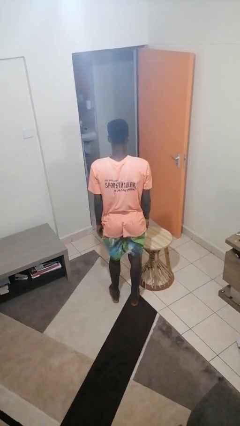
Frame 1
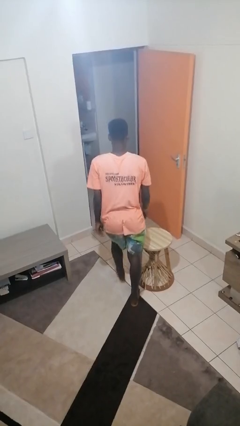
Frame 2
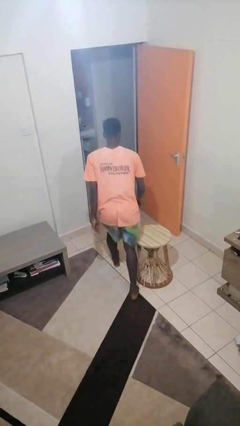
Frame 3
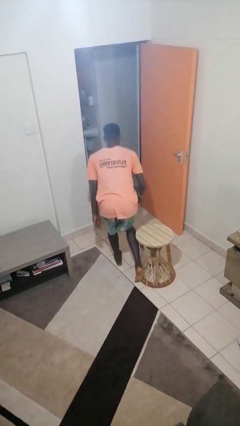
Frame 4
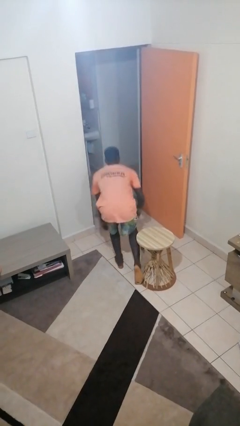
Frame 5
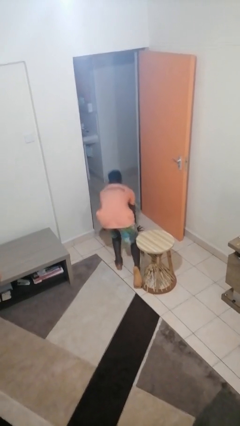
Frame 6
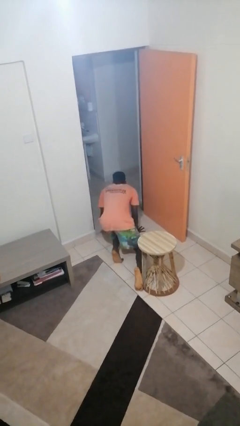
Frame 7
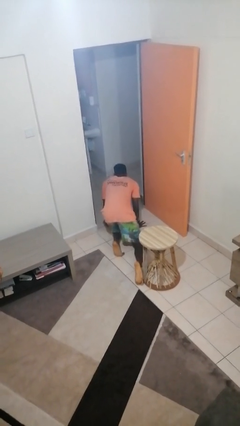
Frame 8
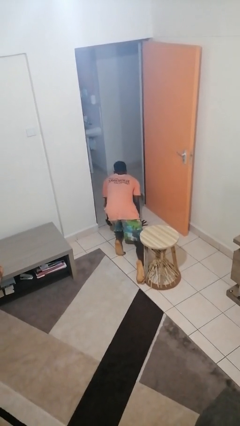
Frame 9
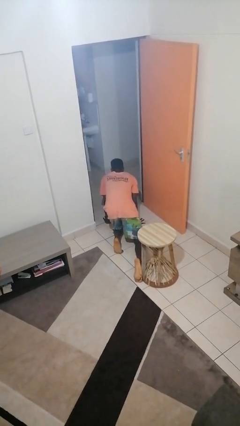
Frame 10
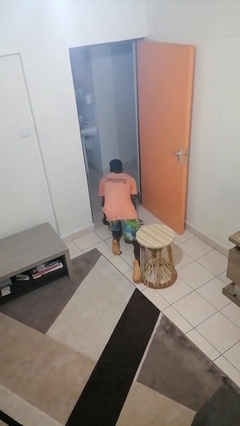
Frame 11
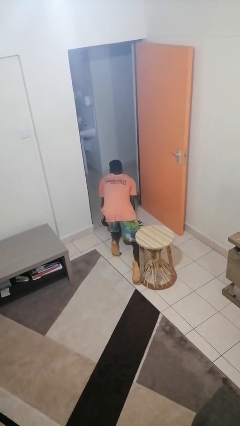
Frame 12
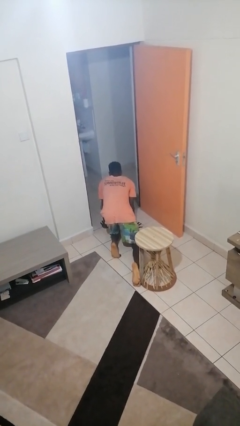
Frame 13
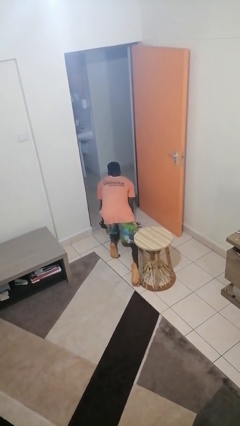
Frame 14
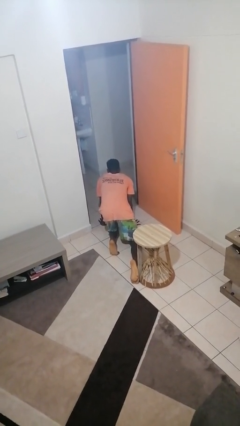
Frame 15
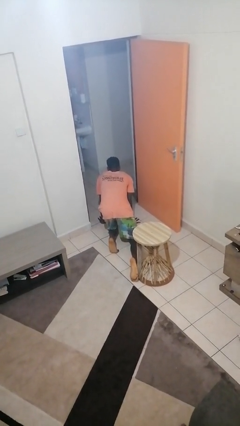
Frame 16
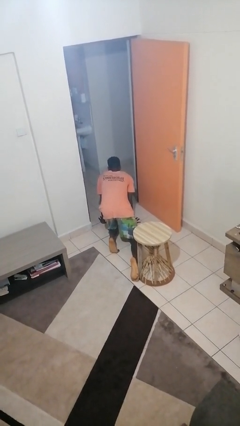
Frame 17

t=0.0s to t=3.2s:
person trips on object on floor

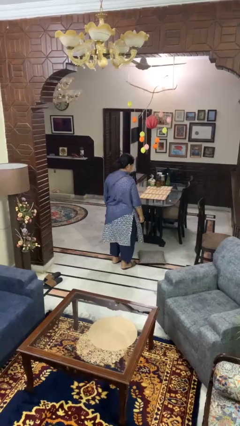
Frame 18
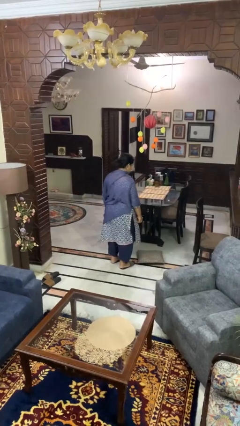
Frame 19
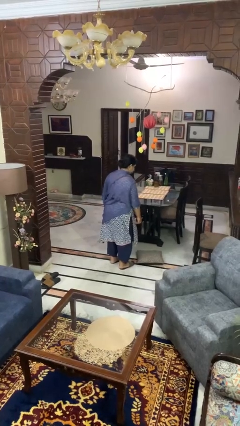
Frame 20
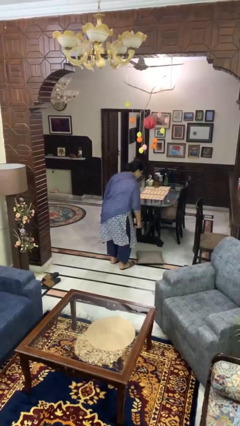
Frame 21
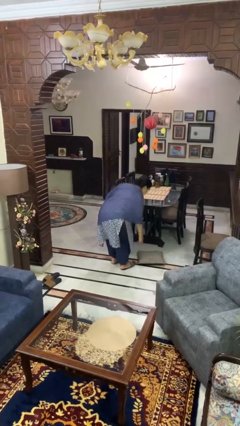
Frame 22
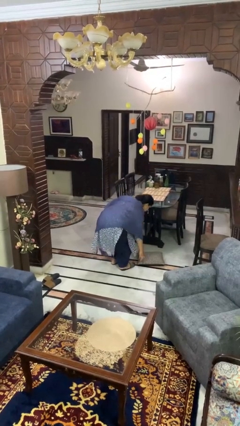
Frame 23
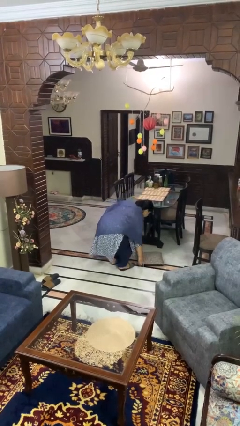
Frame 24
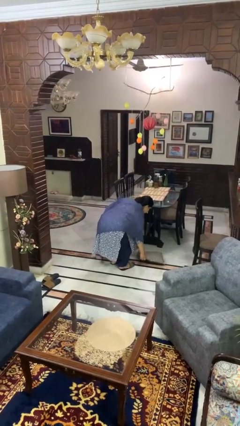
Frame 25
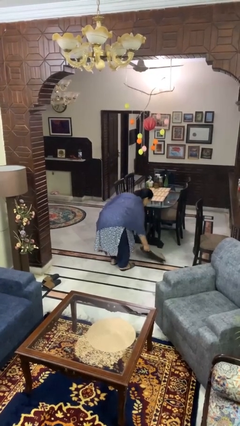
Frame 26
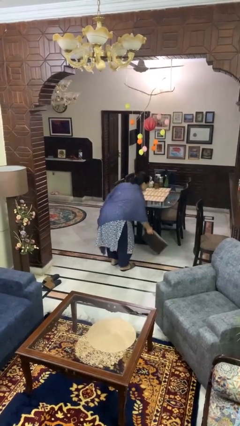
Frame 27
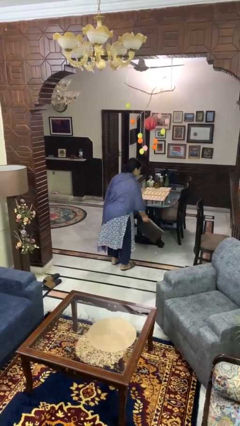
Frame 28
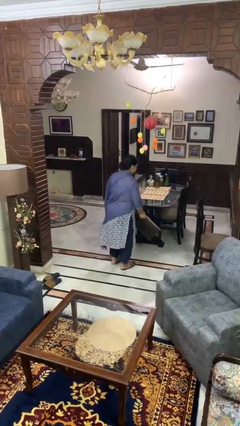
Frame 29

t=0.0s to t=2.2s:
person picks up object from floor

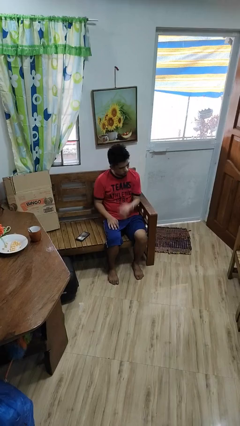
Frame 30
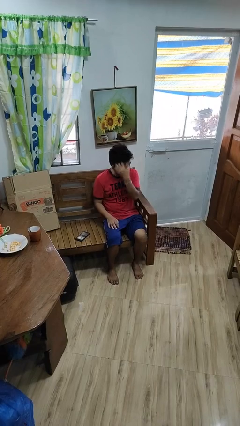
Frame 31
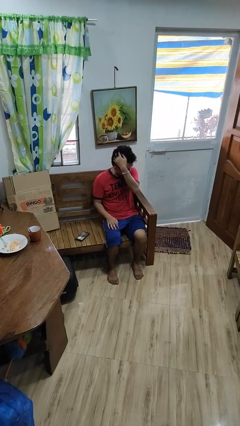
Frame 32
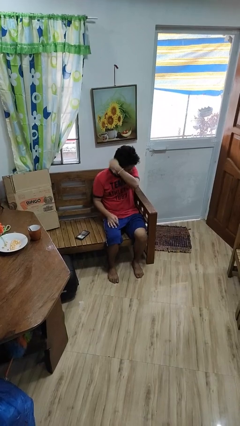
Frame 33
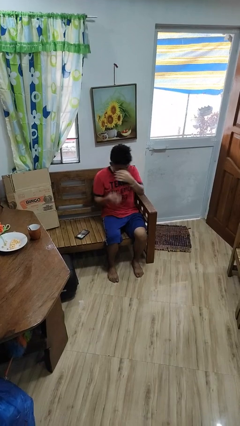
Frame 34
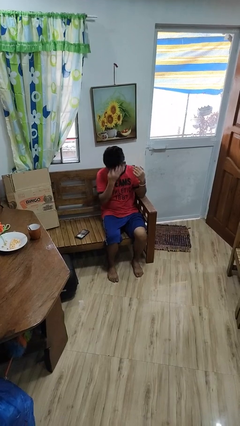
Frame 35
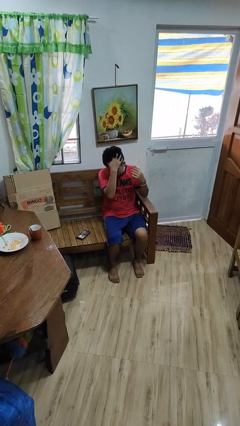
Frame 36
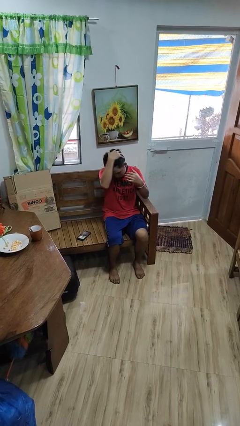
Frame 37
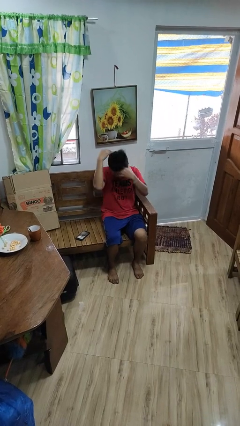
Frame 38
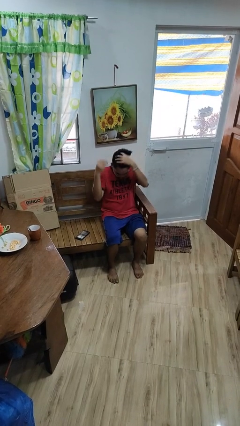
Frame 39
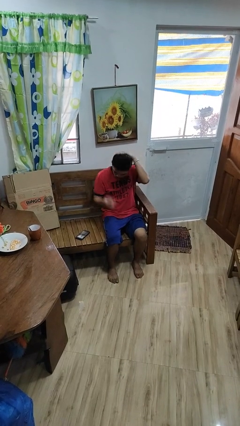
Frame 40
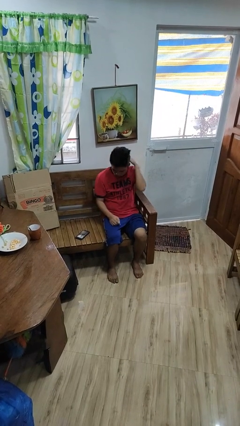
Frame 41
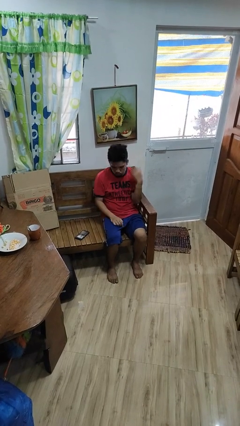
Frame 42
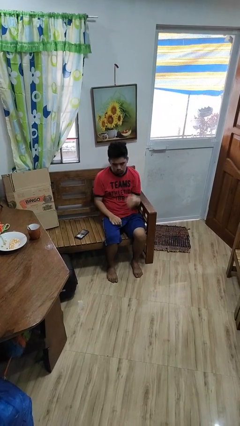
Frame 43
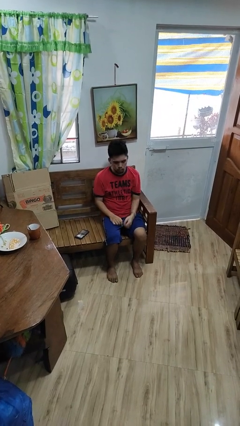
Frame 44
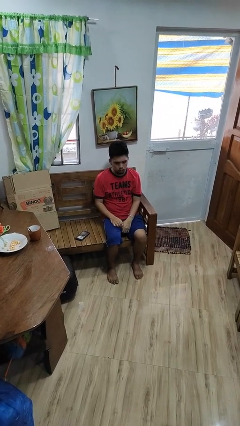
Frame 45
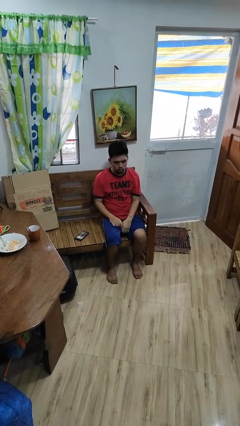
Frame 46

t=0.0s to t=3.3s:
person strokes hair

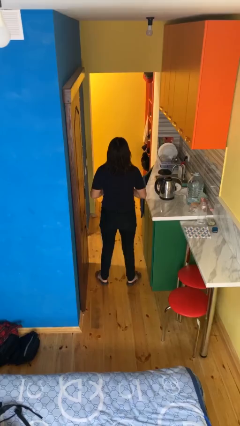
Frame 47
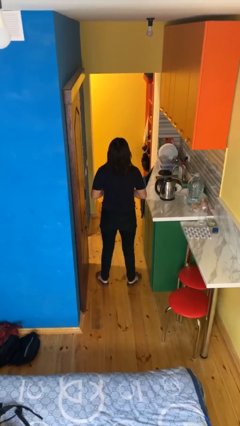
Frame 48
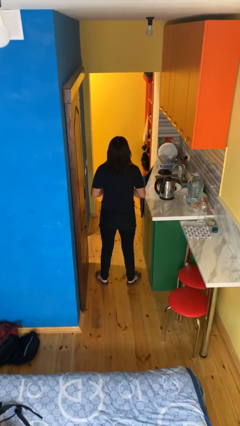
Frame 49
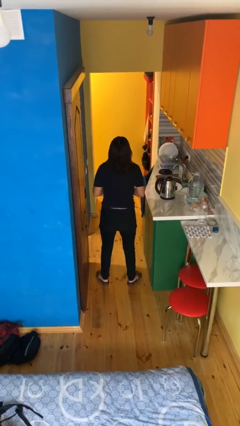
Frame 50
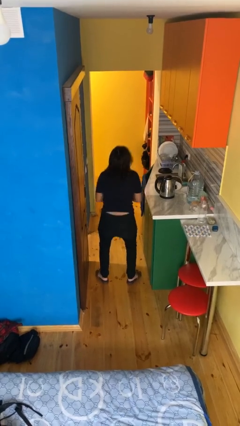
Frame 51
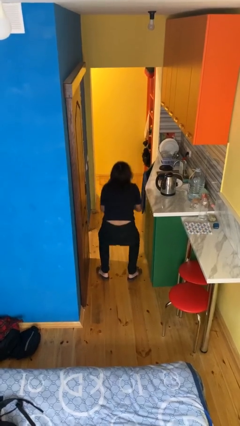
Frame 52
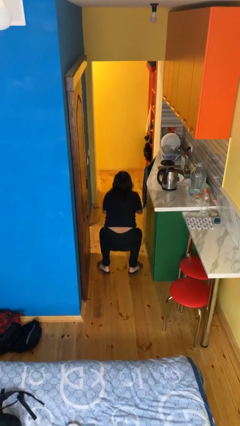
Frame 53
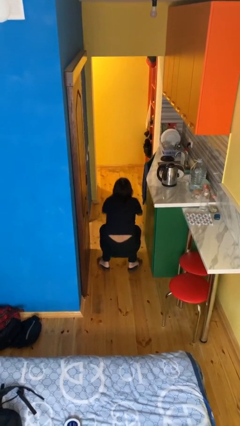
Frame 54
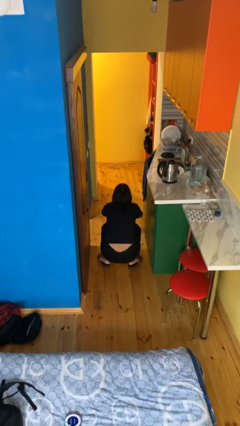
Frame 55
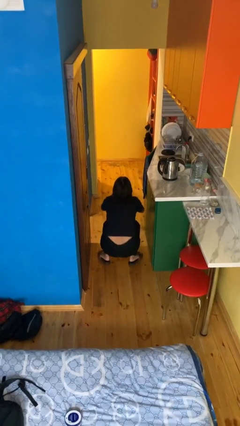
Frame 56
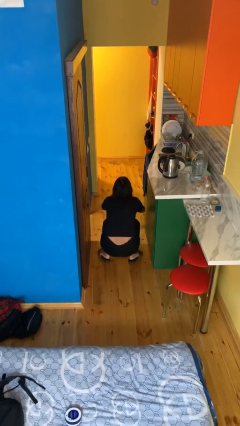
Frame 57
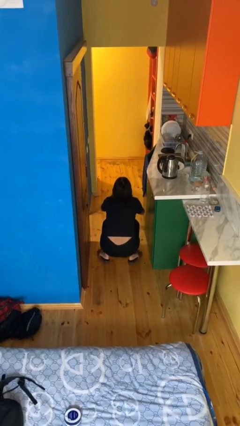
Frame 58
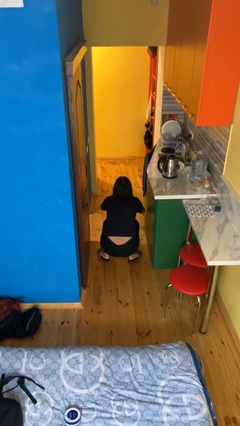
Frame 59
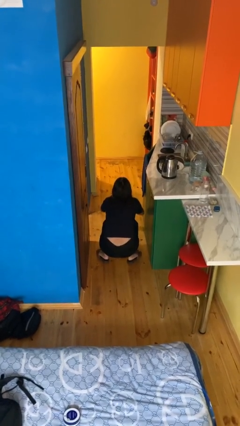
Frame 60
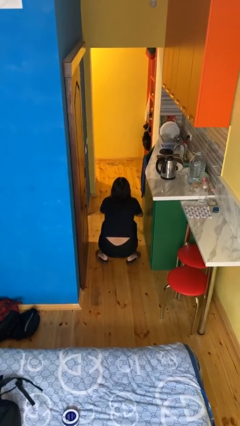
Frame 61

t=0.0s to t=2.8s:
person squats

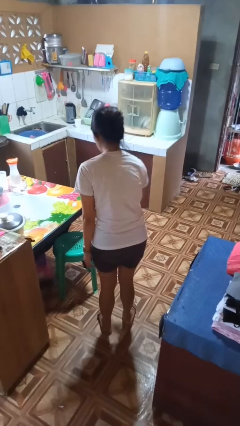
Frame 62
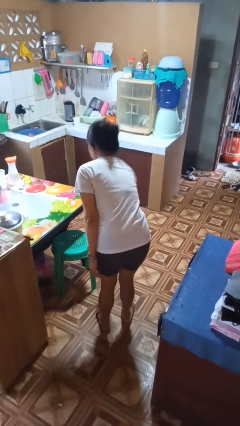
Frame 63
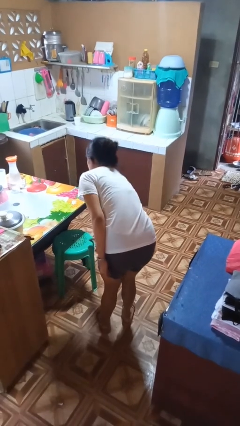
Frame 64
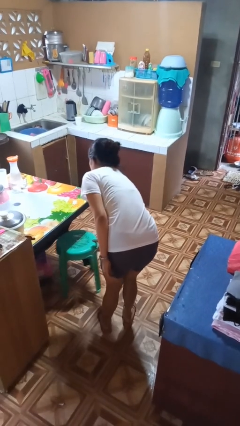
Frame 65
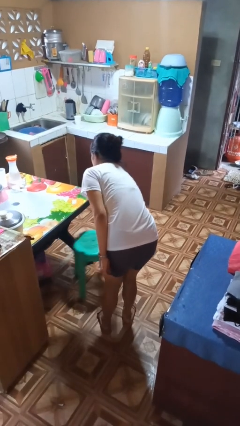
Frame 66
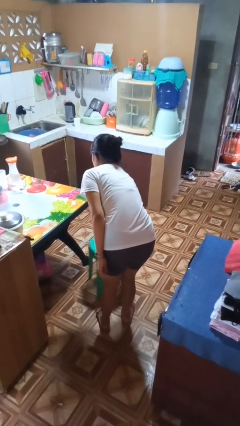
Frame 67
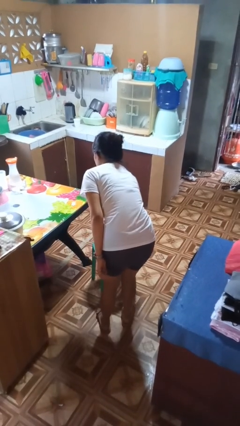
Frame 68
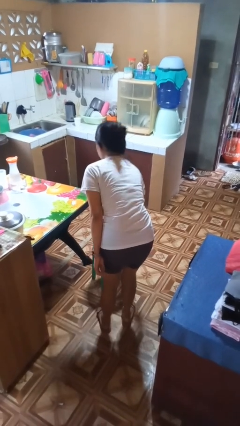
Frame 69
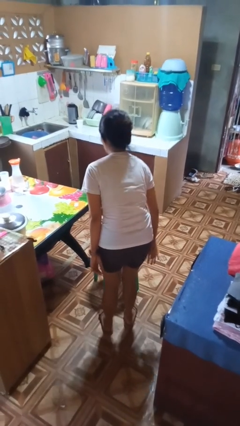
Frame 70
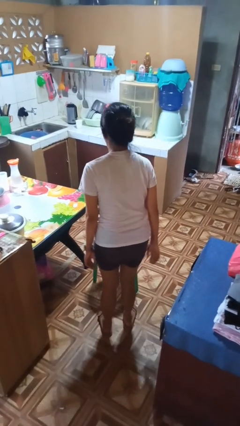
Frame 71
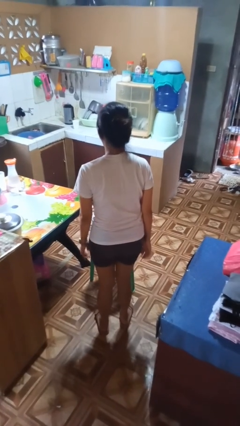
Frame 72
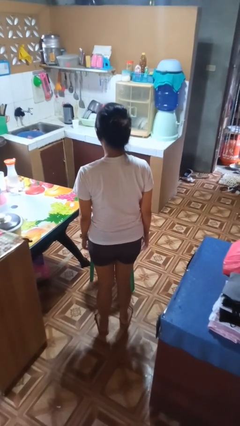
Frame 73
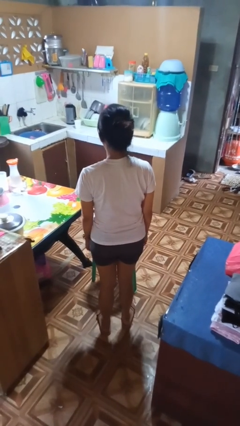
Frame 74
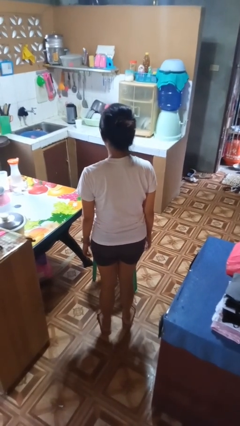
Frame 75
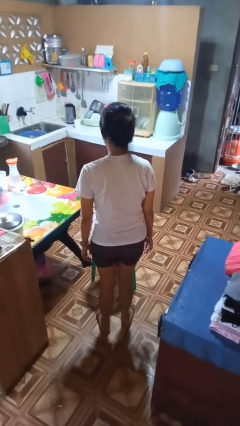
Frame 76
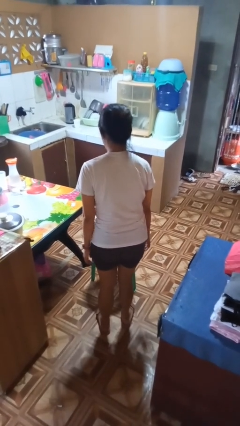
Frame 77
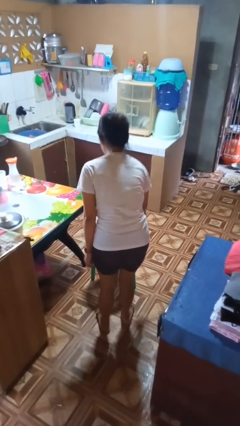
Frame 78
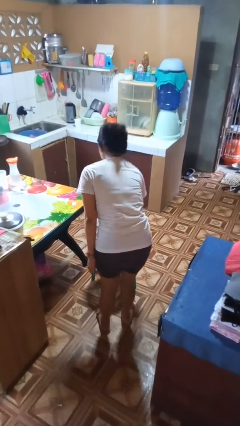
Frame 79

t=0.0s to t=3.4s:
person pulls out chair

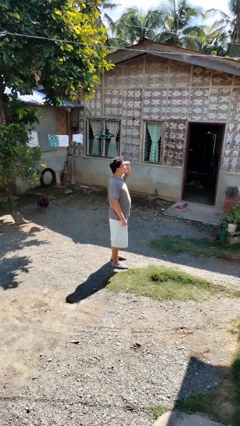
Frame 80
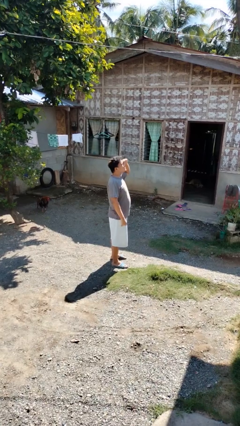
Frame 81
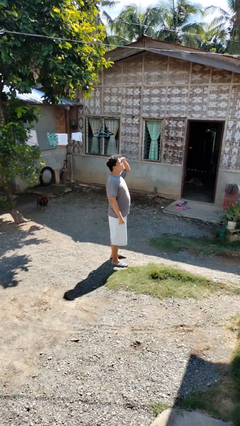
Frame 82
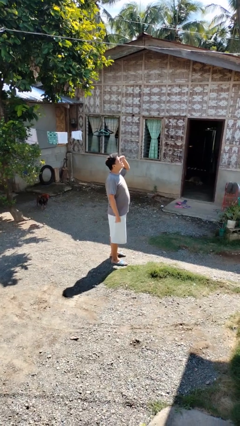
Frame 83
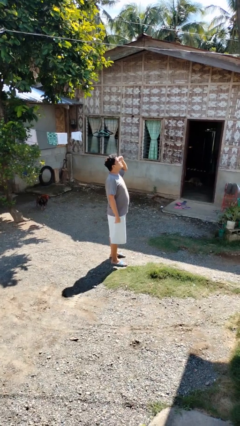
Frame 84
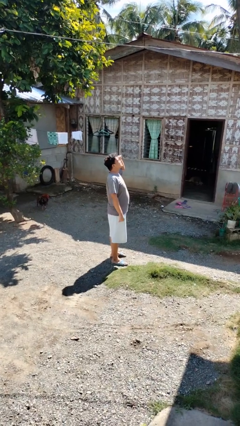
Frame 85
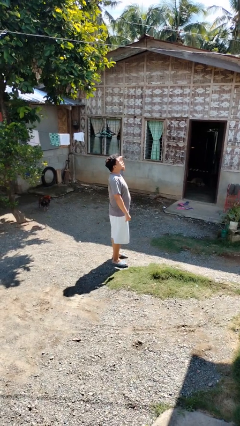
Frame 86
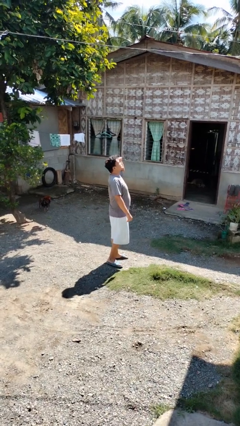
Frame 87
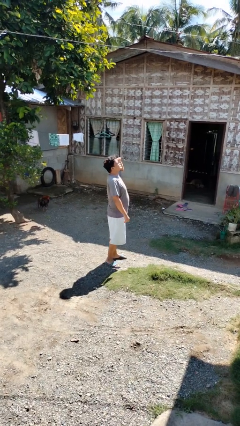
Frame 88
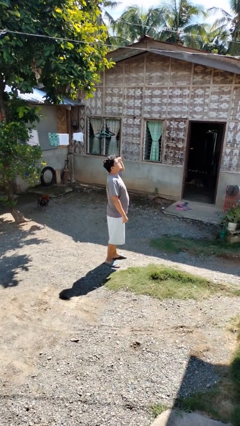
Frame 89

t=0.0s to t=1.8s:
person shades eyes

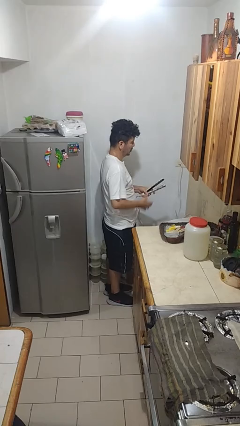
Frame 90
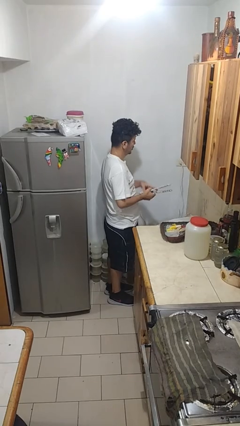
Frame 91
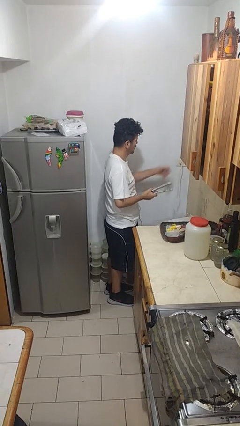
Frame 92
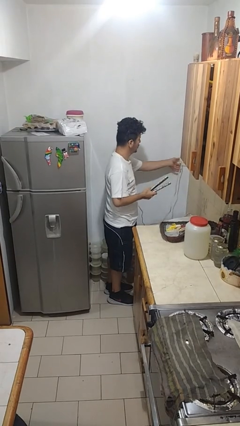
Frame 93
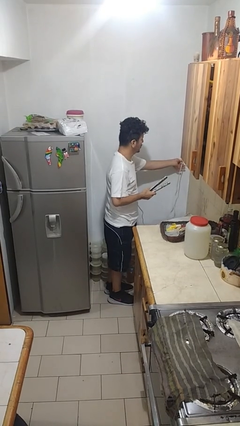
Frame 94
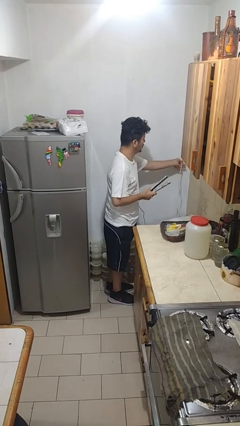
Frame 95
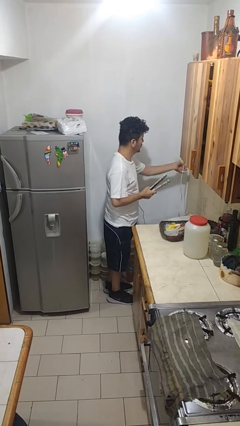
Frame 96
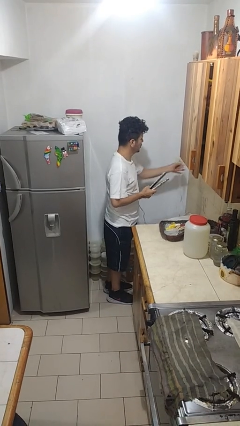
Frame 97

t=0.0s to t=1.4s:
person unplugs from electrical socket
